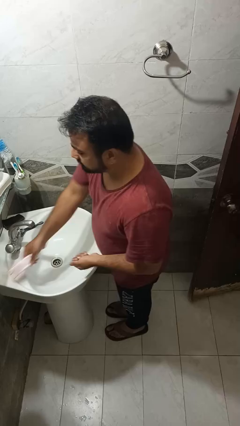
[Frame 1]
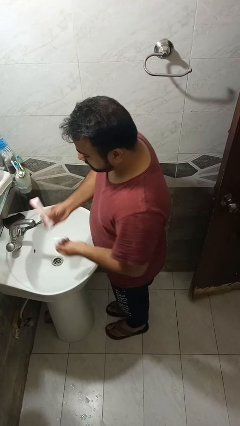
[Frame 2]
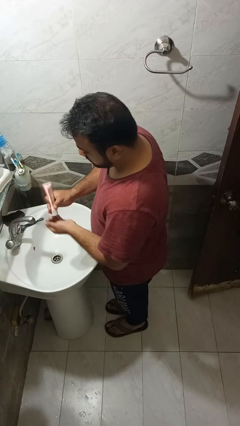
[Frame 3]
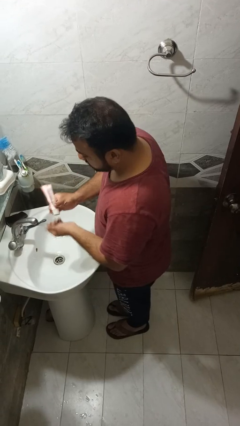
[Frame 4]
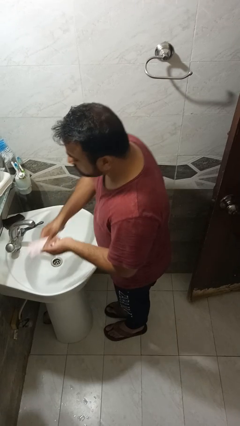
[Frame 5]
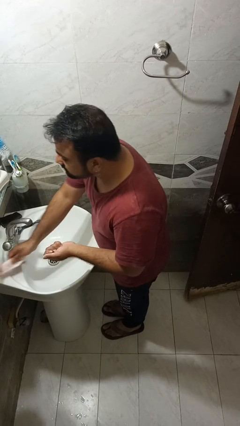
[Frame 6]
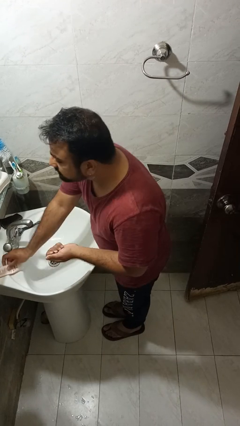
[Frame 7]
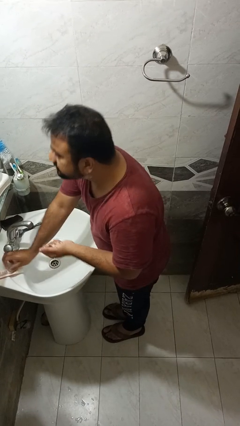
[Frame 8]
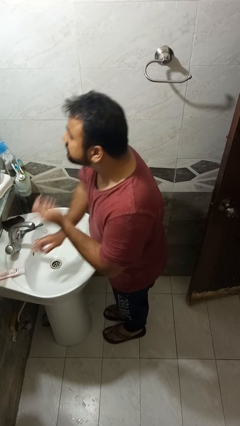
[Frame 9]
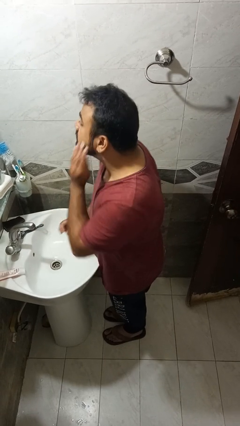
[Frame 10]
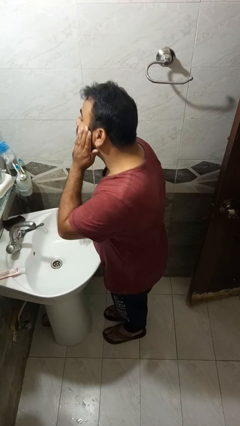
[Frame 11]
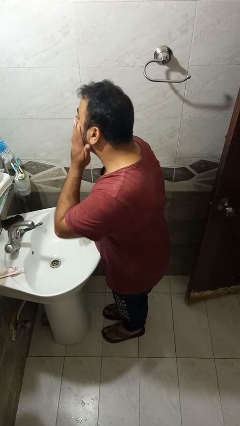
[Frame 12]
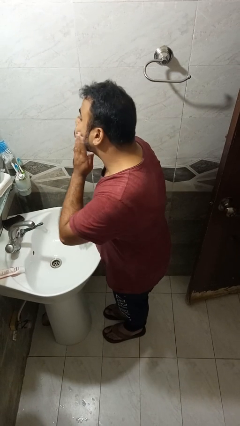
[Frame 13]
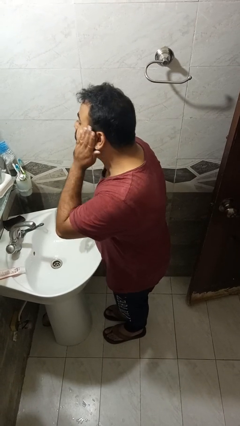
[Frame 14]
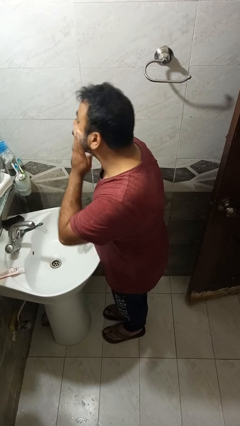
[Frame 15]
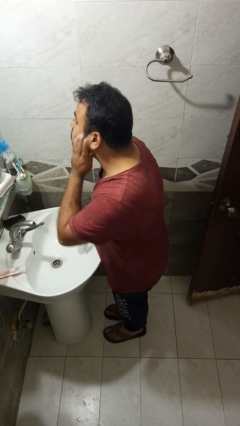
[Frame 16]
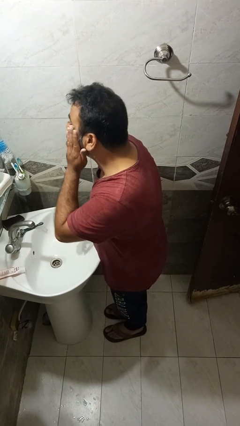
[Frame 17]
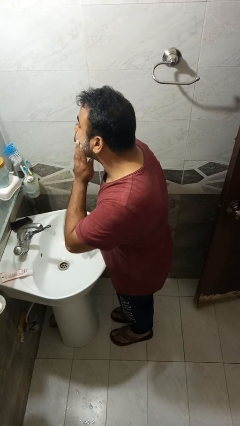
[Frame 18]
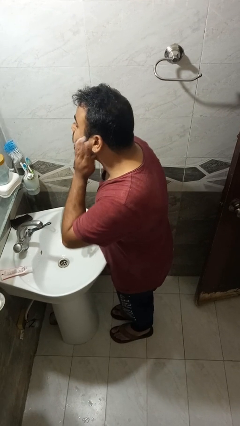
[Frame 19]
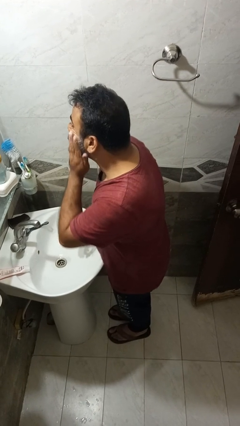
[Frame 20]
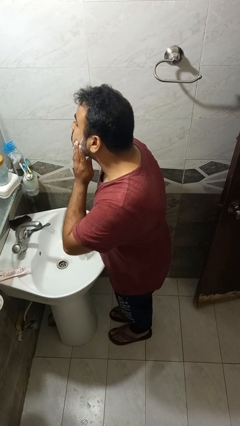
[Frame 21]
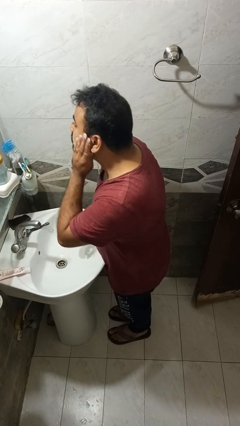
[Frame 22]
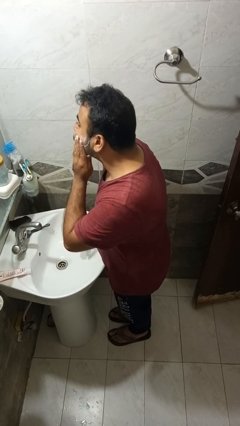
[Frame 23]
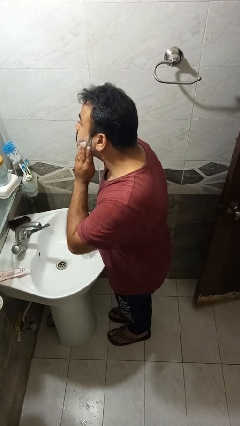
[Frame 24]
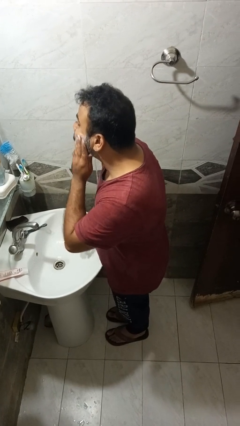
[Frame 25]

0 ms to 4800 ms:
person applies shaving cream

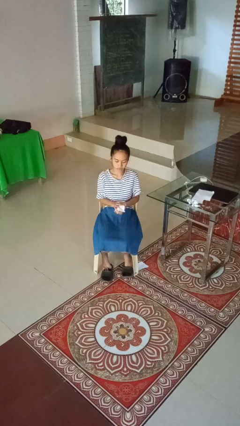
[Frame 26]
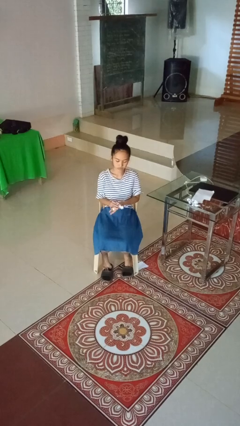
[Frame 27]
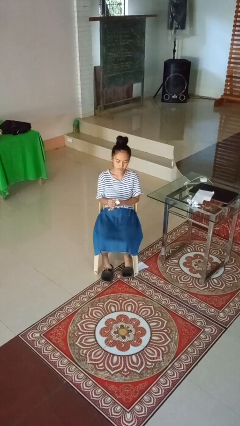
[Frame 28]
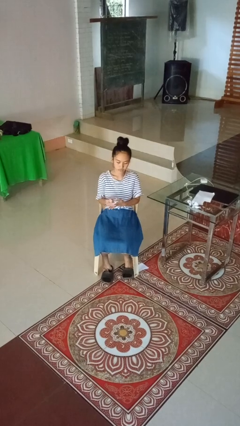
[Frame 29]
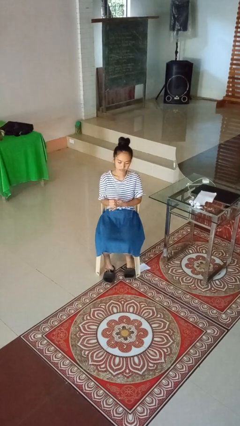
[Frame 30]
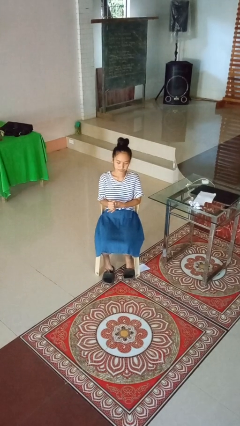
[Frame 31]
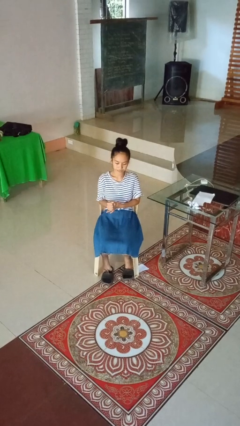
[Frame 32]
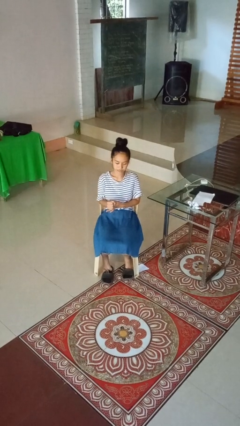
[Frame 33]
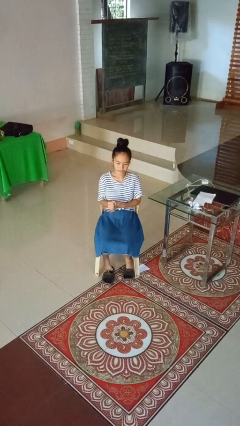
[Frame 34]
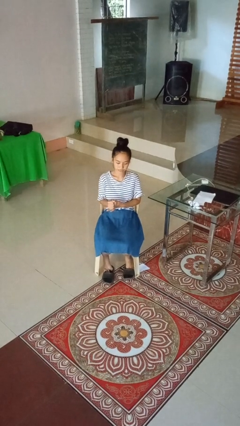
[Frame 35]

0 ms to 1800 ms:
person crumples paper

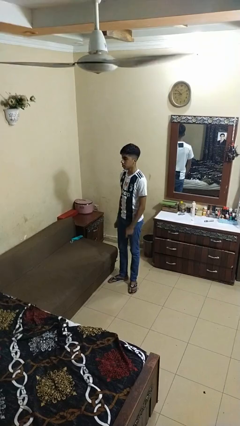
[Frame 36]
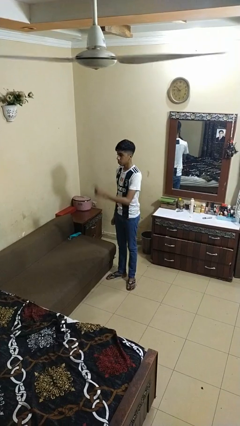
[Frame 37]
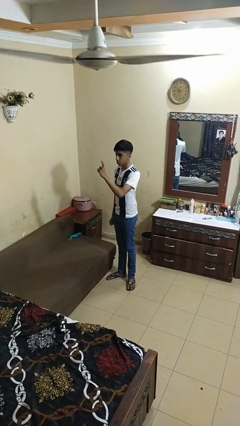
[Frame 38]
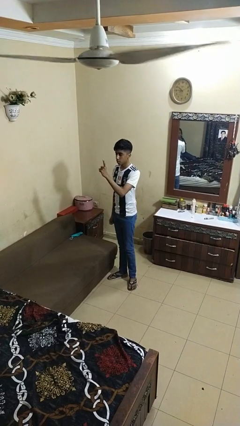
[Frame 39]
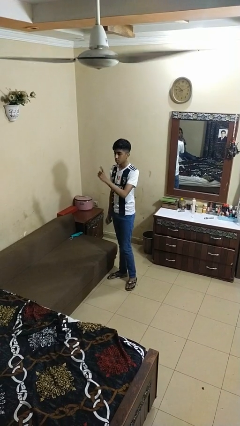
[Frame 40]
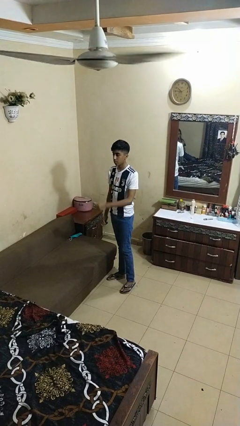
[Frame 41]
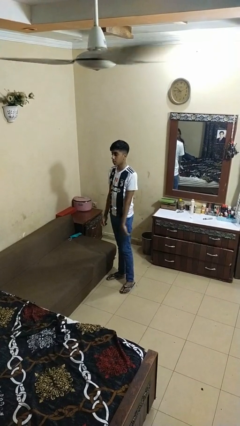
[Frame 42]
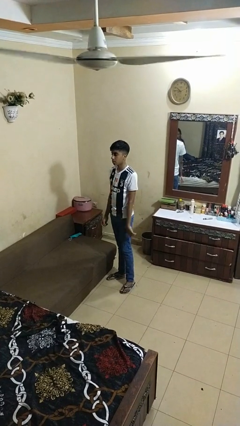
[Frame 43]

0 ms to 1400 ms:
person gestures number one

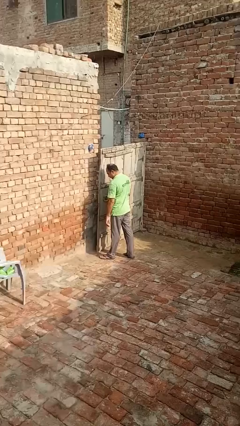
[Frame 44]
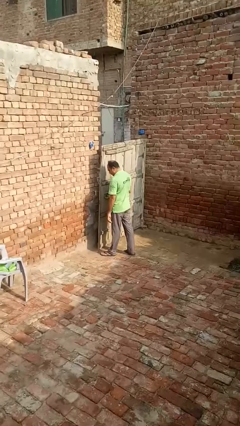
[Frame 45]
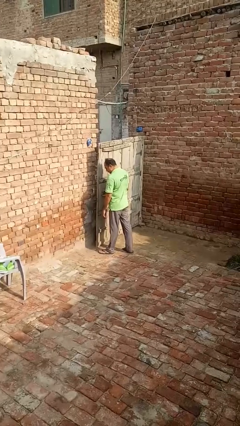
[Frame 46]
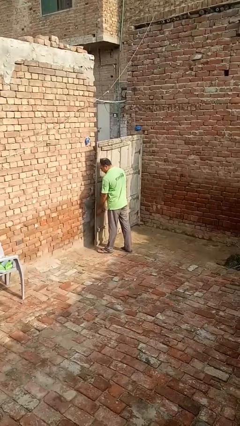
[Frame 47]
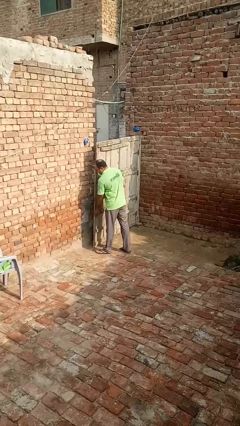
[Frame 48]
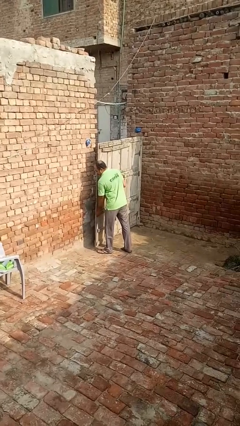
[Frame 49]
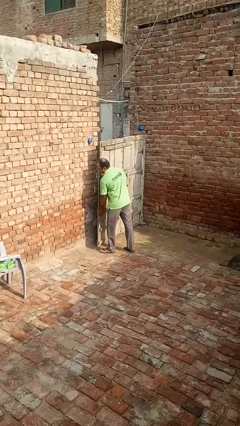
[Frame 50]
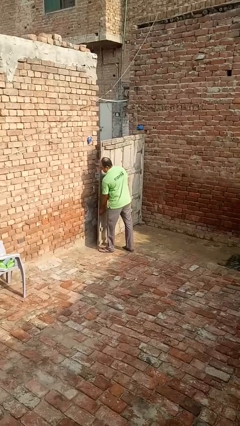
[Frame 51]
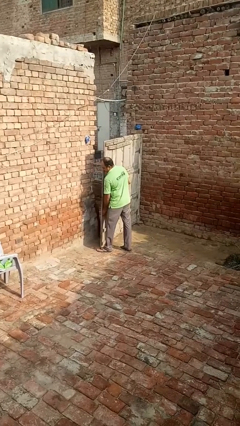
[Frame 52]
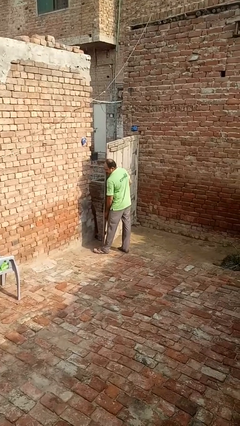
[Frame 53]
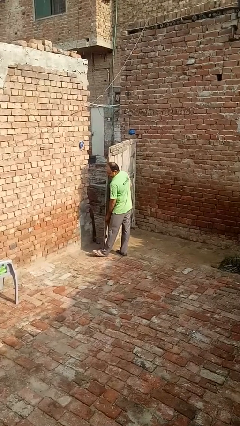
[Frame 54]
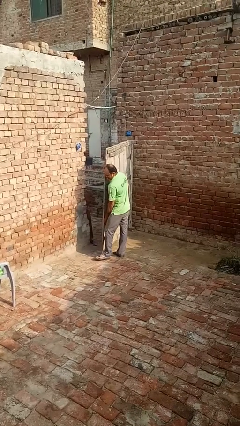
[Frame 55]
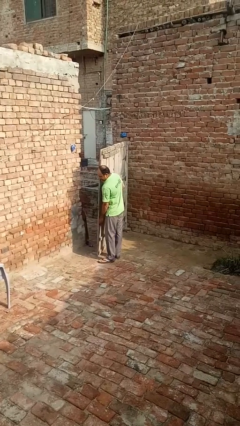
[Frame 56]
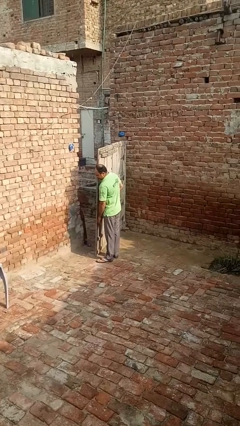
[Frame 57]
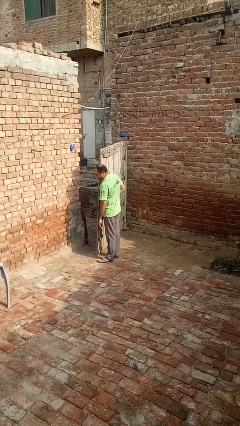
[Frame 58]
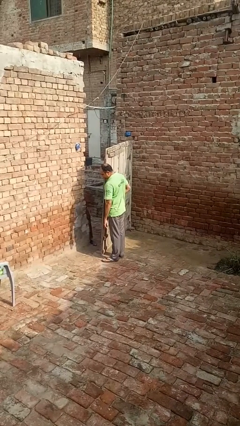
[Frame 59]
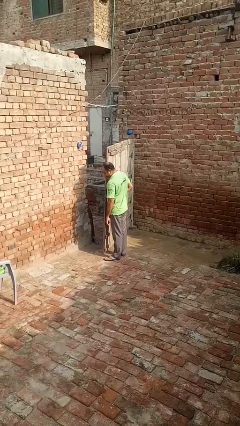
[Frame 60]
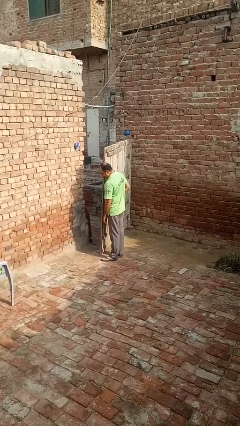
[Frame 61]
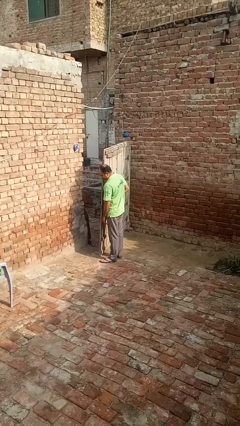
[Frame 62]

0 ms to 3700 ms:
person opens gate

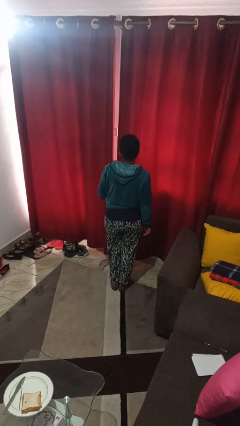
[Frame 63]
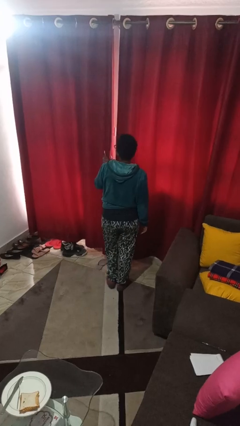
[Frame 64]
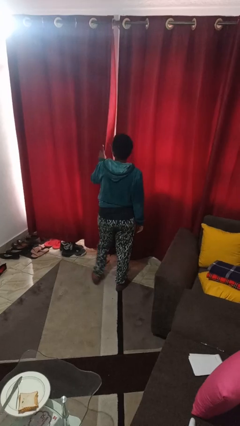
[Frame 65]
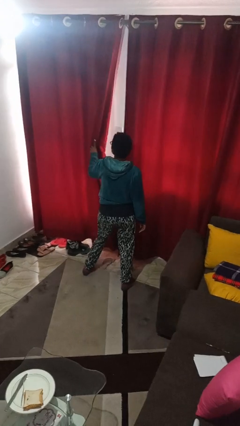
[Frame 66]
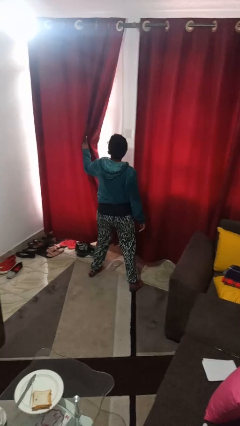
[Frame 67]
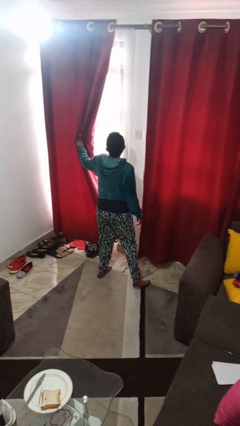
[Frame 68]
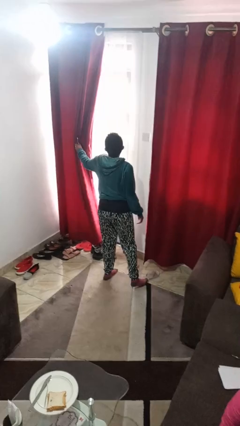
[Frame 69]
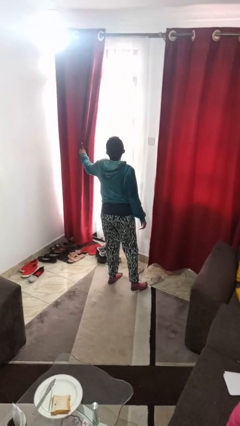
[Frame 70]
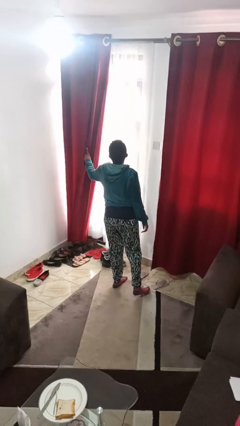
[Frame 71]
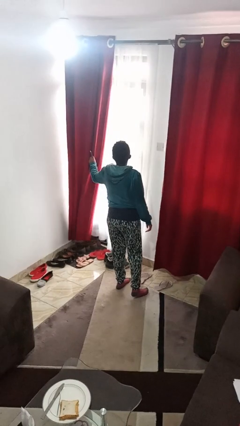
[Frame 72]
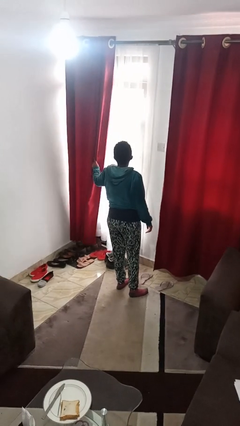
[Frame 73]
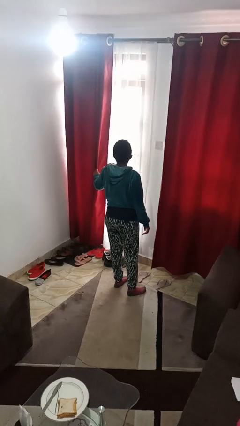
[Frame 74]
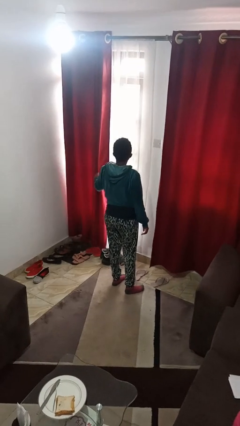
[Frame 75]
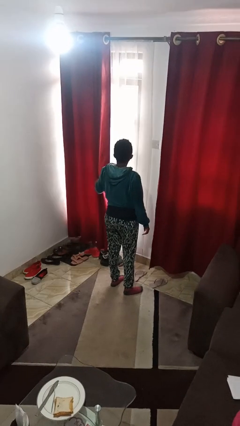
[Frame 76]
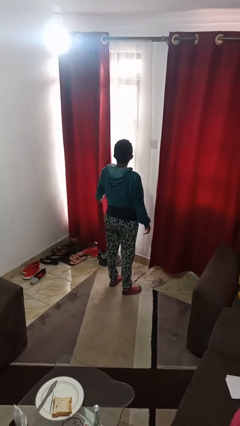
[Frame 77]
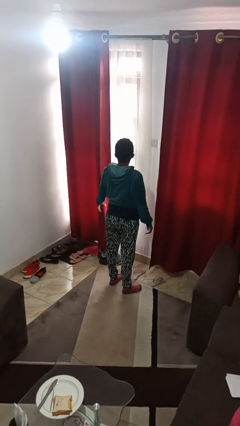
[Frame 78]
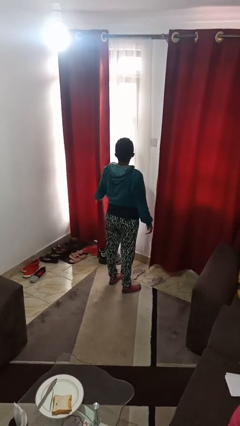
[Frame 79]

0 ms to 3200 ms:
person opens curtains

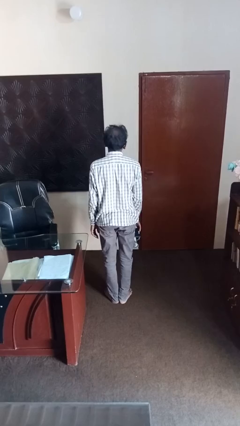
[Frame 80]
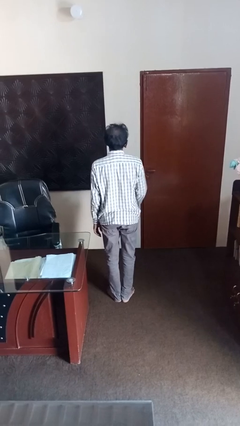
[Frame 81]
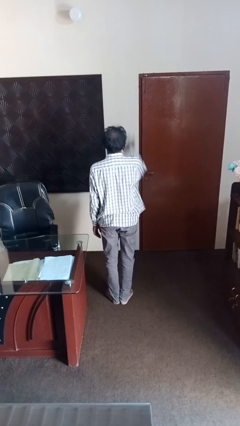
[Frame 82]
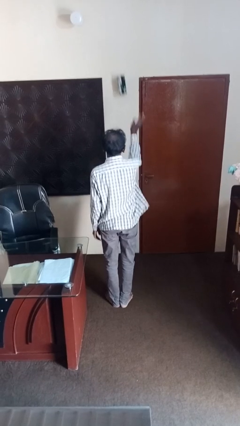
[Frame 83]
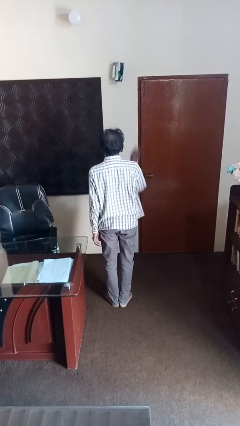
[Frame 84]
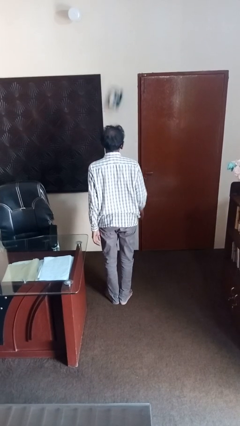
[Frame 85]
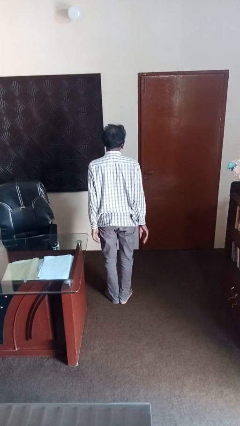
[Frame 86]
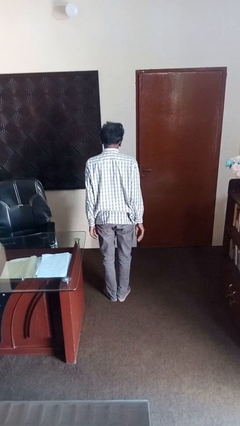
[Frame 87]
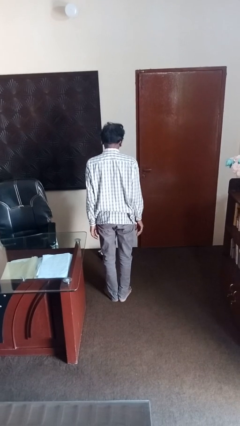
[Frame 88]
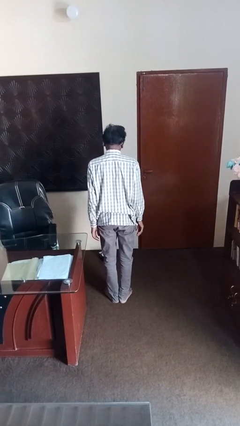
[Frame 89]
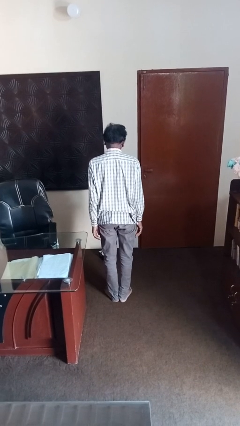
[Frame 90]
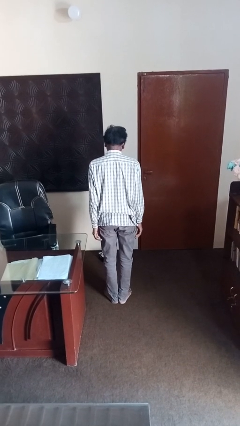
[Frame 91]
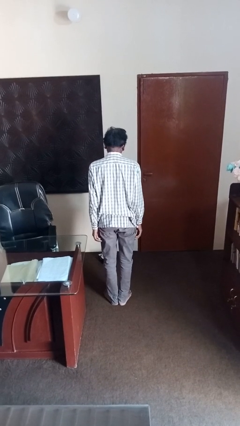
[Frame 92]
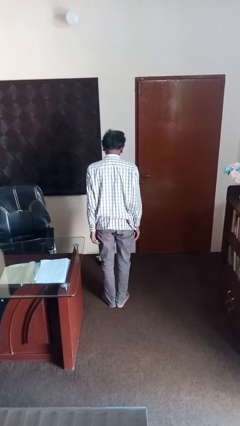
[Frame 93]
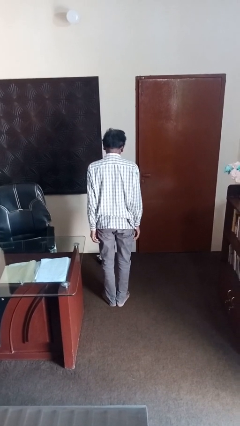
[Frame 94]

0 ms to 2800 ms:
person throws object into air
